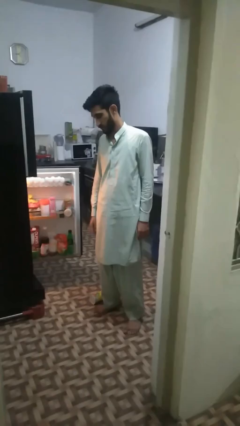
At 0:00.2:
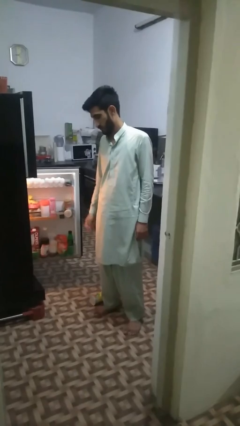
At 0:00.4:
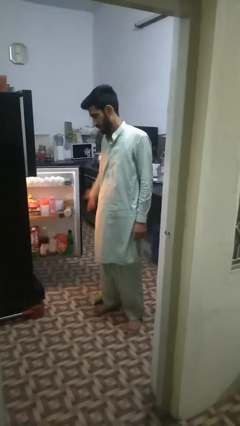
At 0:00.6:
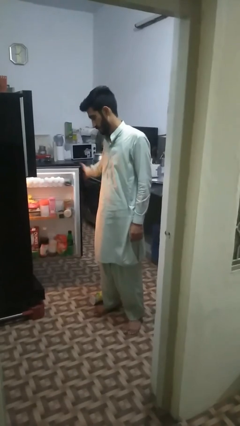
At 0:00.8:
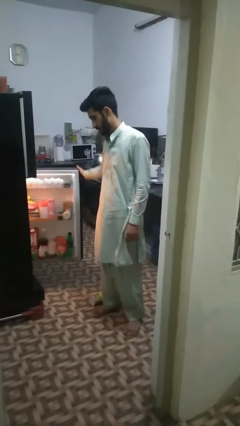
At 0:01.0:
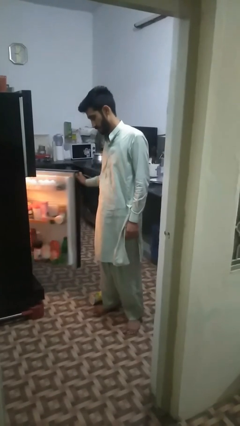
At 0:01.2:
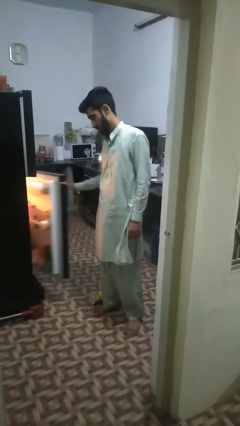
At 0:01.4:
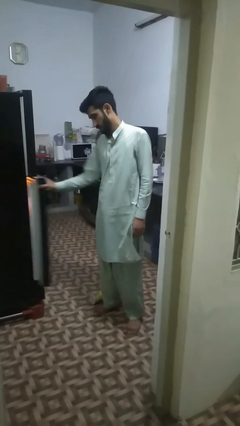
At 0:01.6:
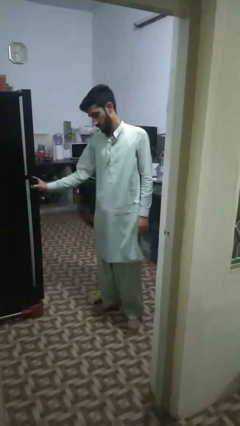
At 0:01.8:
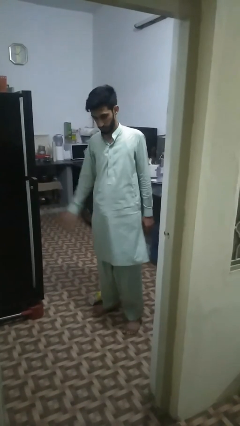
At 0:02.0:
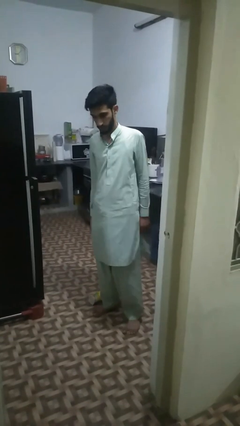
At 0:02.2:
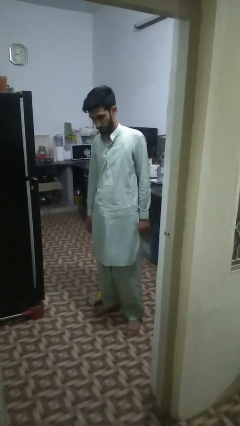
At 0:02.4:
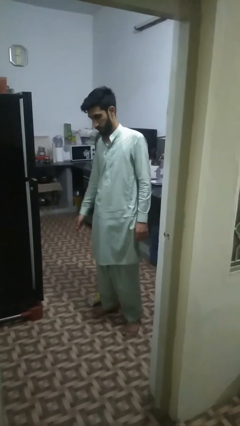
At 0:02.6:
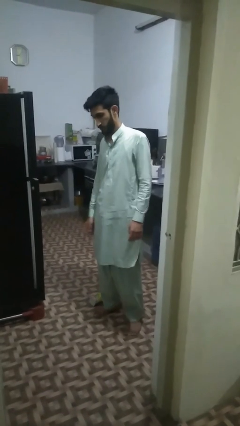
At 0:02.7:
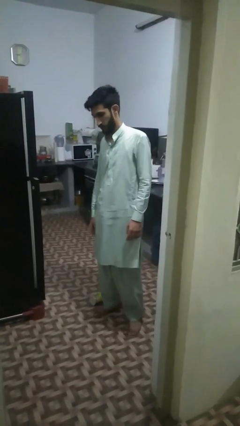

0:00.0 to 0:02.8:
person closes refrigerator

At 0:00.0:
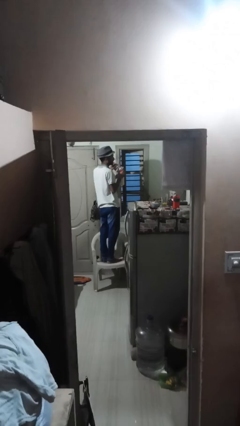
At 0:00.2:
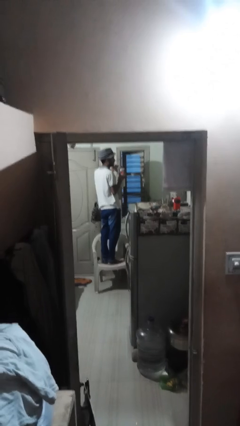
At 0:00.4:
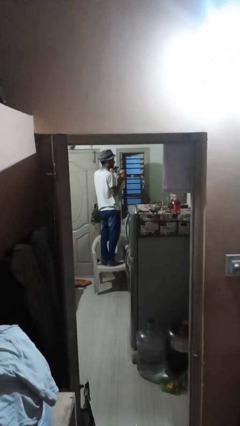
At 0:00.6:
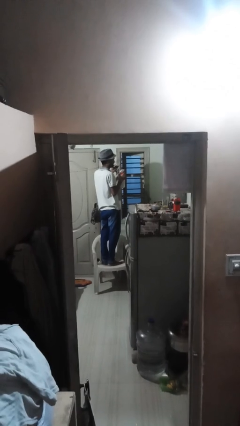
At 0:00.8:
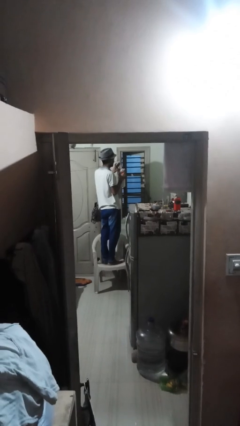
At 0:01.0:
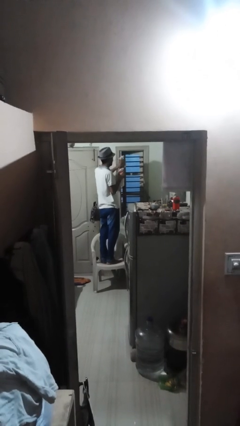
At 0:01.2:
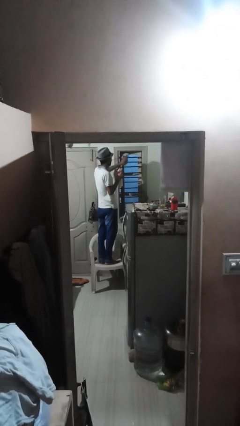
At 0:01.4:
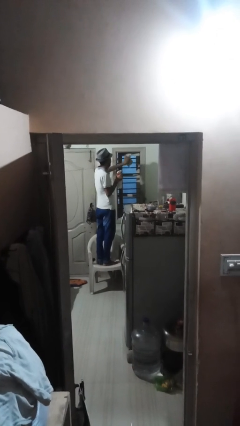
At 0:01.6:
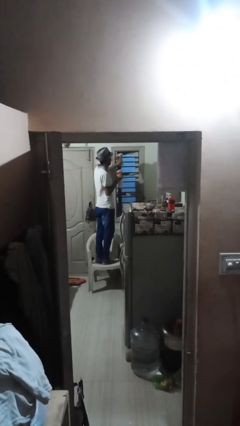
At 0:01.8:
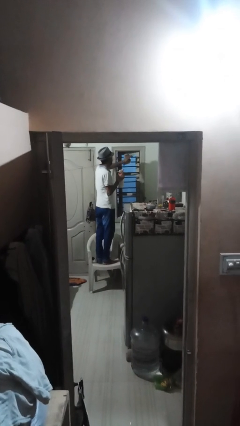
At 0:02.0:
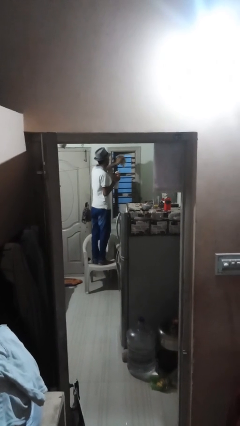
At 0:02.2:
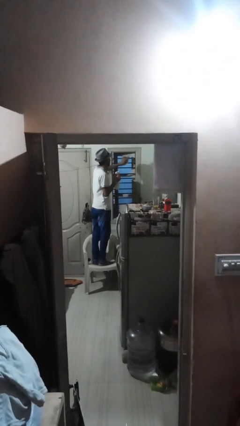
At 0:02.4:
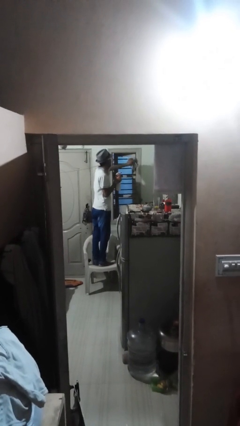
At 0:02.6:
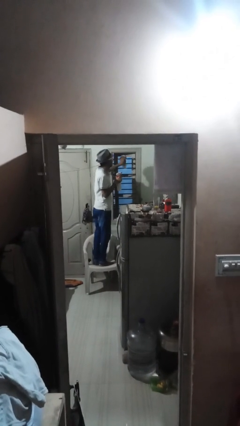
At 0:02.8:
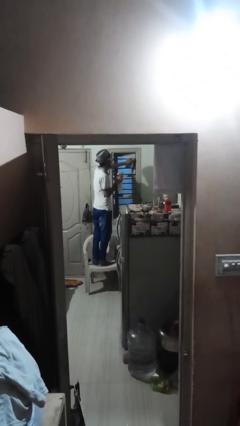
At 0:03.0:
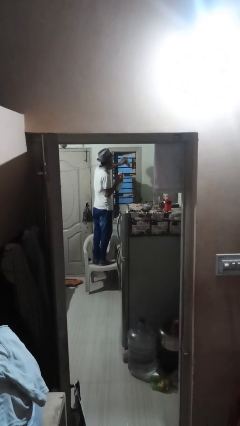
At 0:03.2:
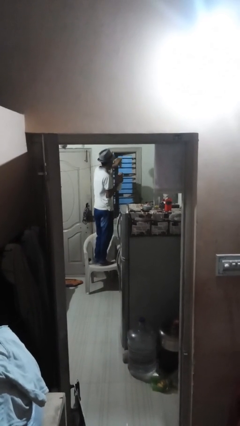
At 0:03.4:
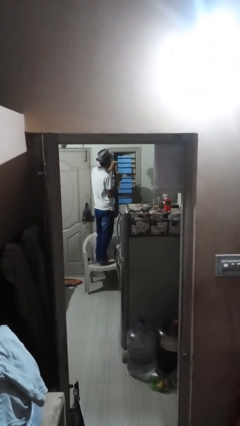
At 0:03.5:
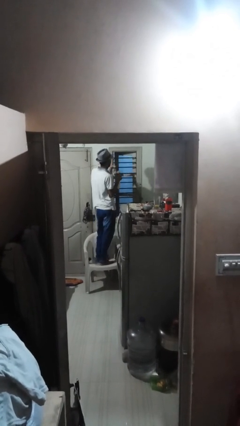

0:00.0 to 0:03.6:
person washes window

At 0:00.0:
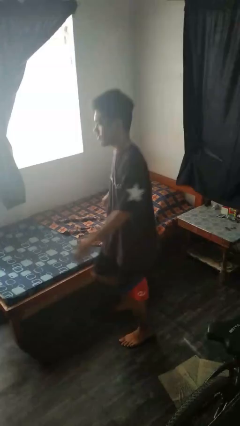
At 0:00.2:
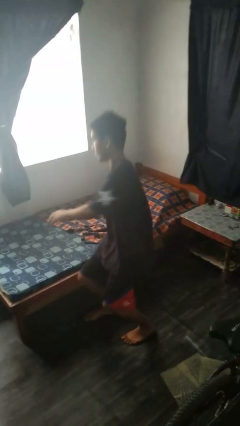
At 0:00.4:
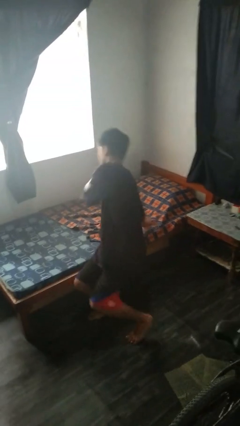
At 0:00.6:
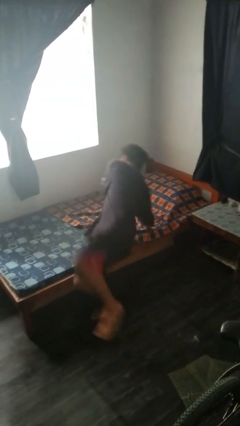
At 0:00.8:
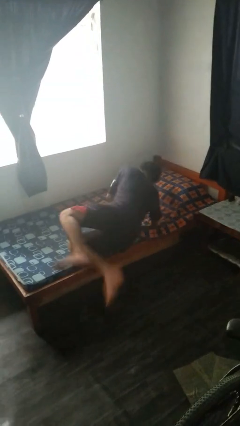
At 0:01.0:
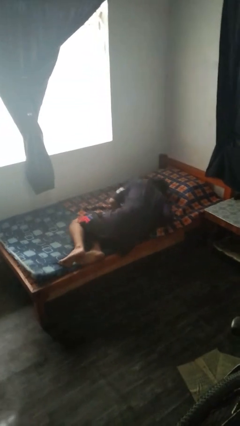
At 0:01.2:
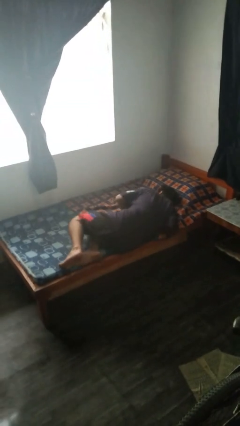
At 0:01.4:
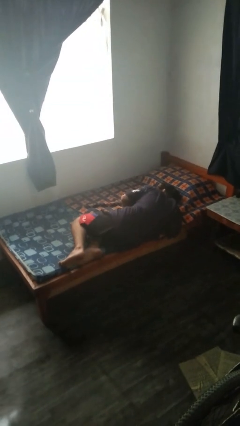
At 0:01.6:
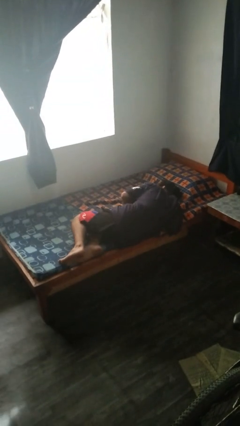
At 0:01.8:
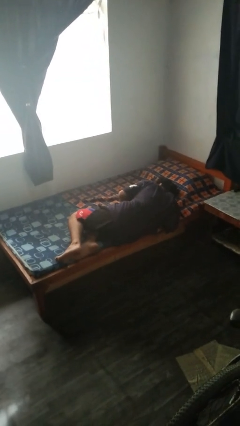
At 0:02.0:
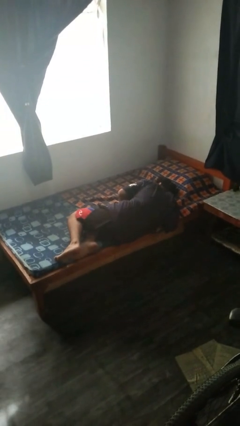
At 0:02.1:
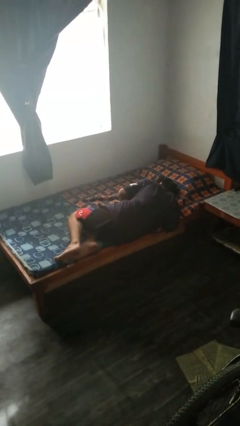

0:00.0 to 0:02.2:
person lies down on bed

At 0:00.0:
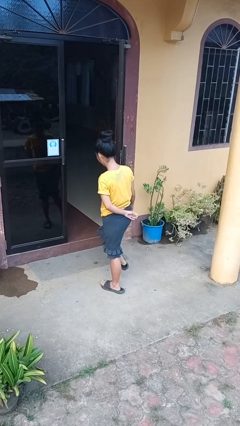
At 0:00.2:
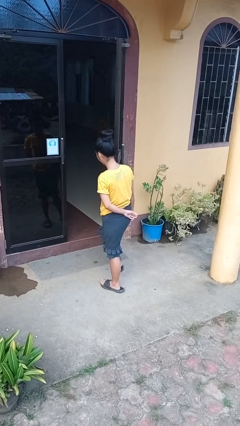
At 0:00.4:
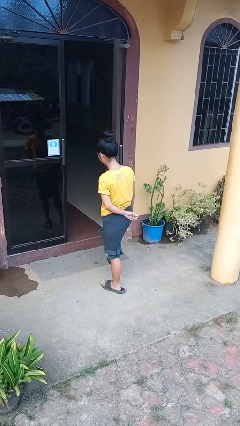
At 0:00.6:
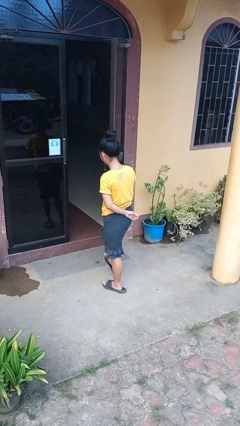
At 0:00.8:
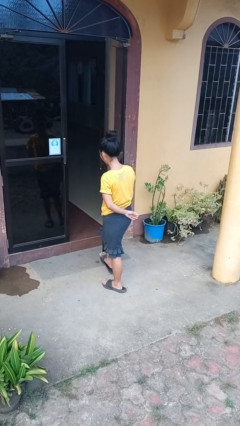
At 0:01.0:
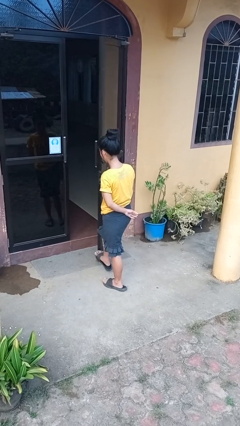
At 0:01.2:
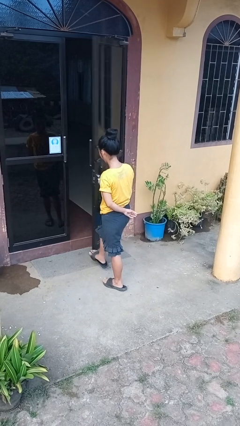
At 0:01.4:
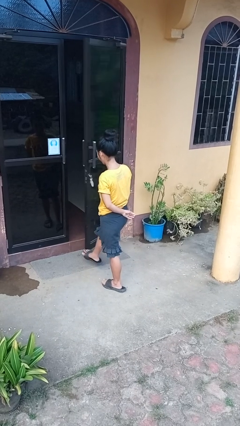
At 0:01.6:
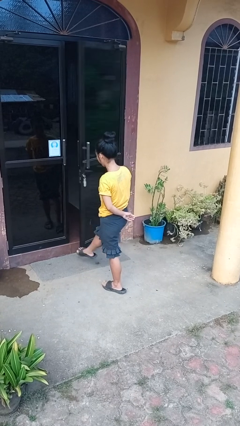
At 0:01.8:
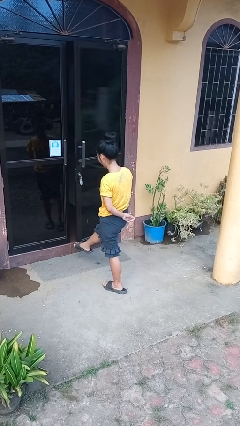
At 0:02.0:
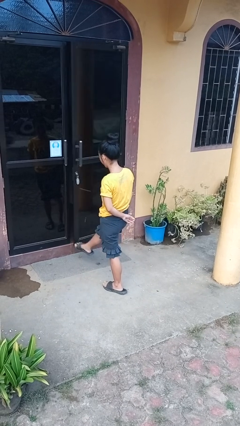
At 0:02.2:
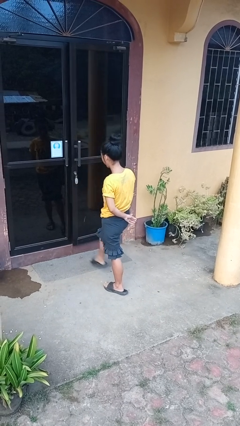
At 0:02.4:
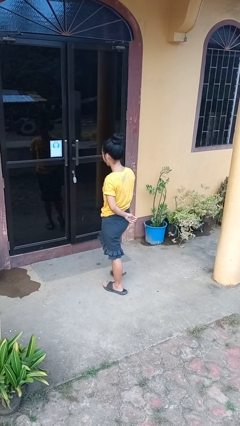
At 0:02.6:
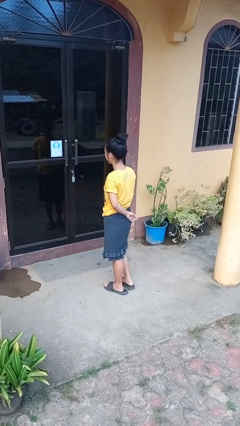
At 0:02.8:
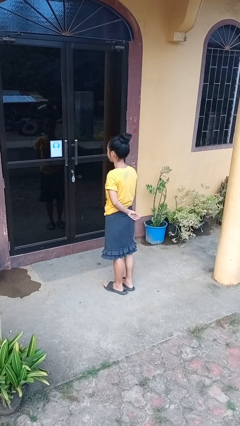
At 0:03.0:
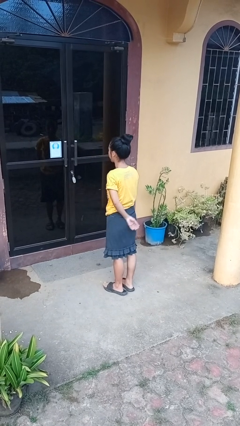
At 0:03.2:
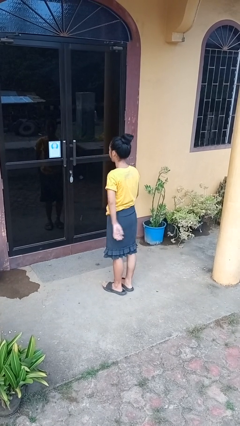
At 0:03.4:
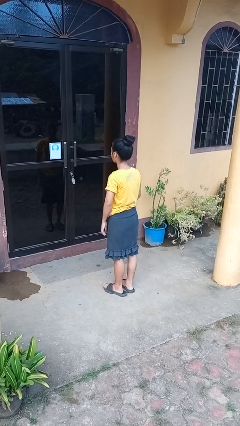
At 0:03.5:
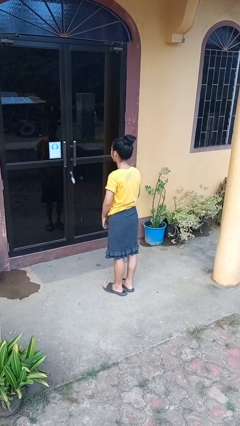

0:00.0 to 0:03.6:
person closes door with foot

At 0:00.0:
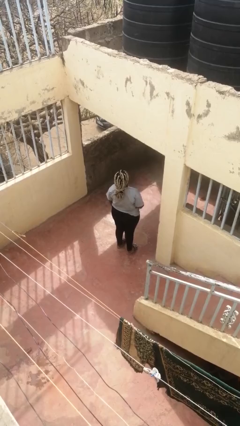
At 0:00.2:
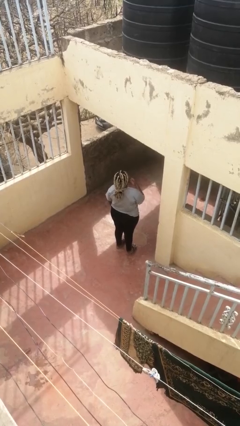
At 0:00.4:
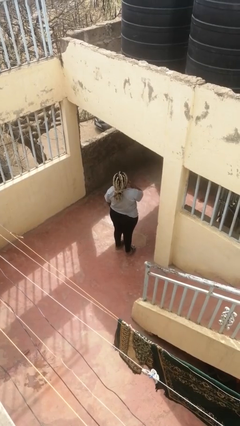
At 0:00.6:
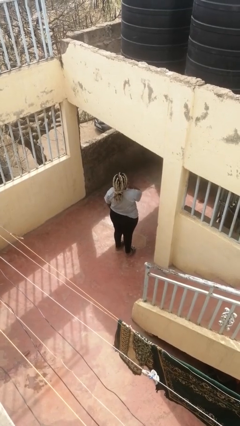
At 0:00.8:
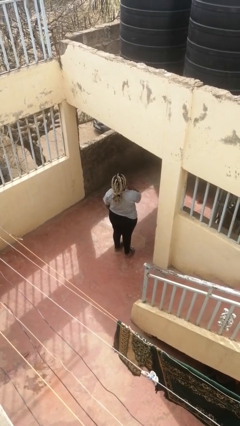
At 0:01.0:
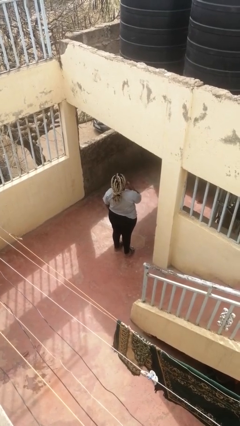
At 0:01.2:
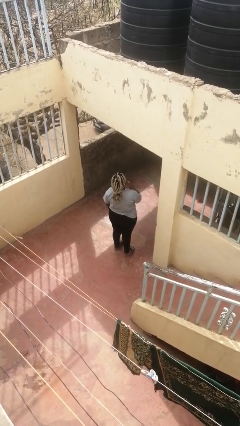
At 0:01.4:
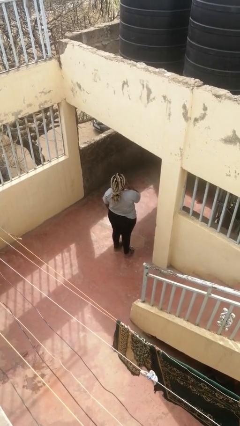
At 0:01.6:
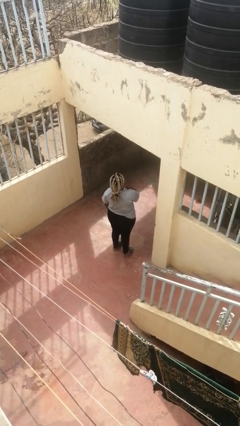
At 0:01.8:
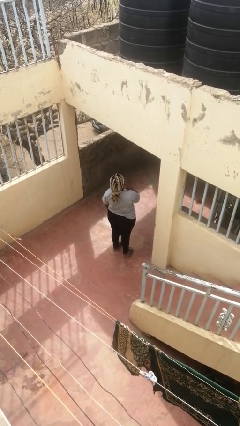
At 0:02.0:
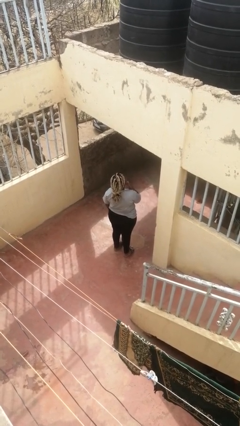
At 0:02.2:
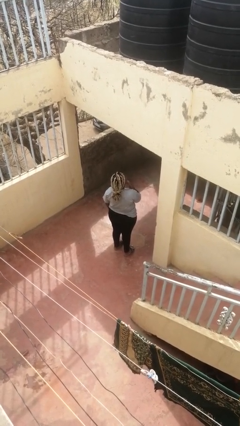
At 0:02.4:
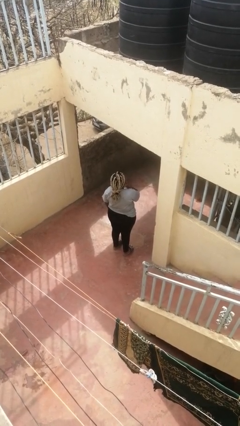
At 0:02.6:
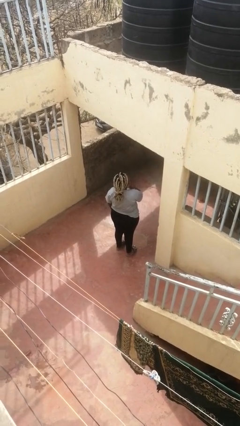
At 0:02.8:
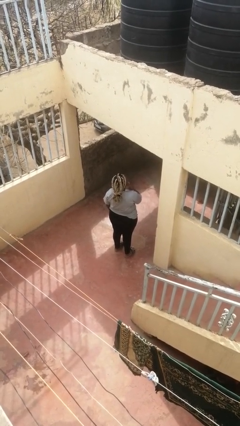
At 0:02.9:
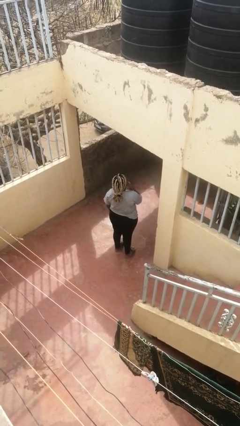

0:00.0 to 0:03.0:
person strokes chin

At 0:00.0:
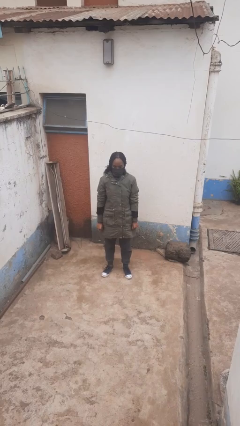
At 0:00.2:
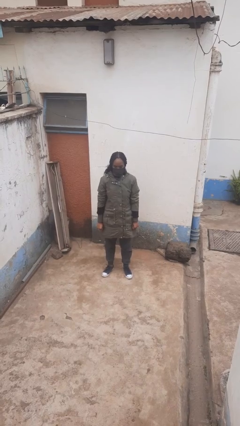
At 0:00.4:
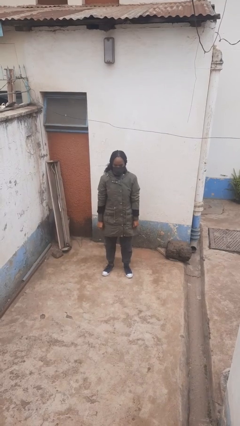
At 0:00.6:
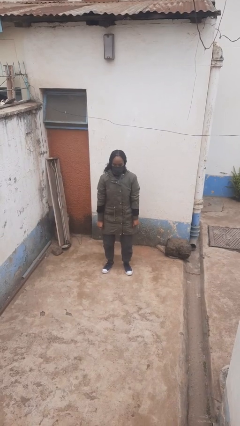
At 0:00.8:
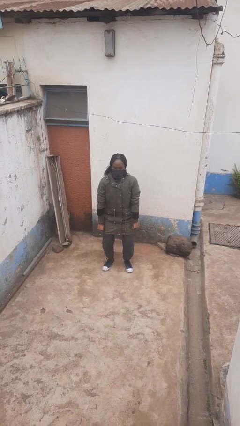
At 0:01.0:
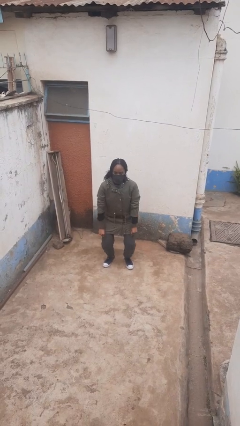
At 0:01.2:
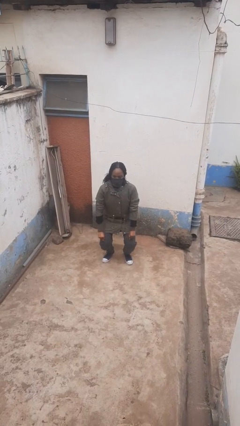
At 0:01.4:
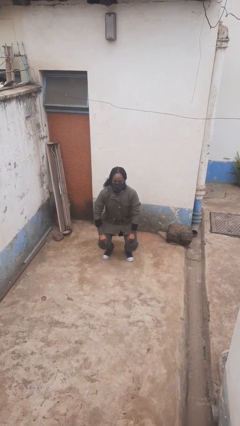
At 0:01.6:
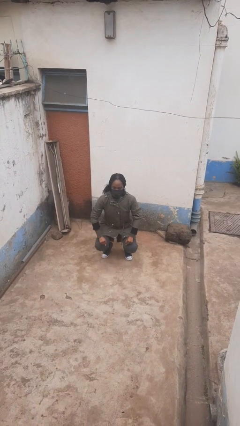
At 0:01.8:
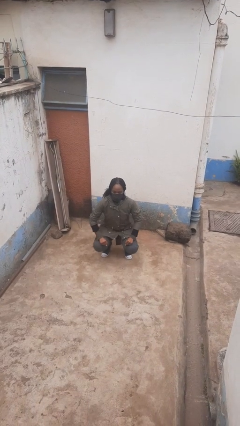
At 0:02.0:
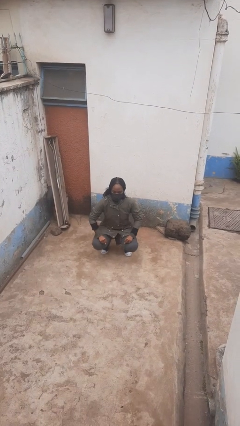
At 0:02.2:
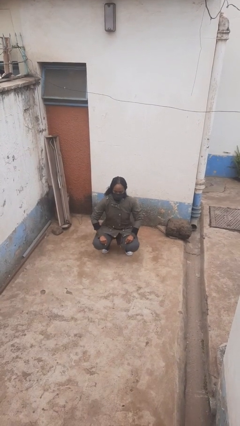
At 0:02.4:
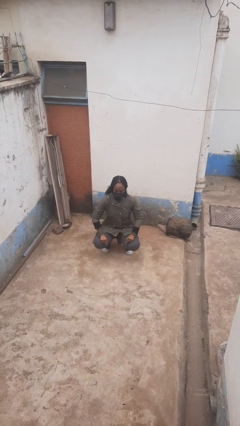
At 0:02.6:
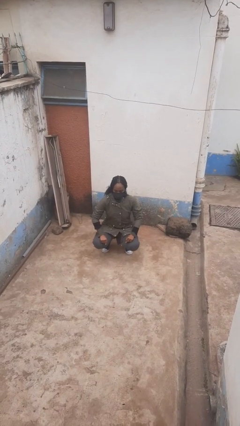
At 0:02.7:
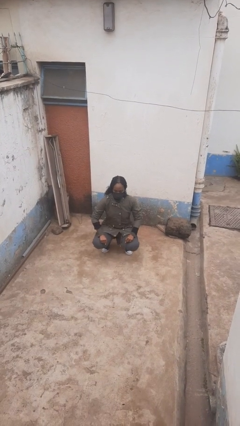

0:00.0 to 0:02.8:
person squats
